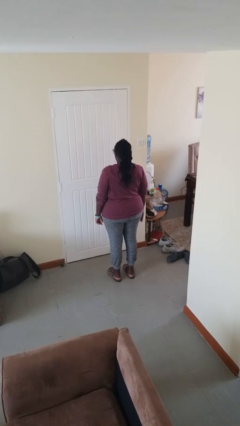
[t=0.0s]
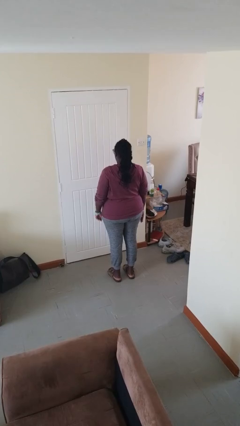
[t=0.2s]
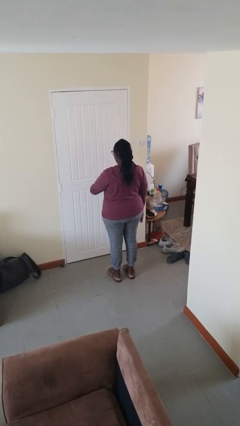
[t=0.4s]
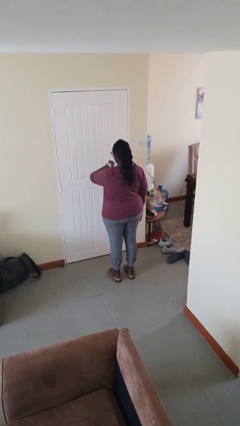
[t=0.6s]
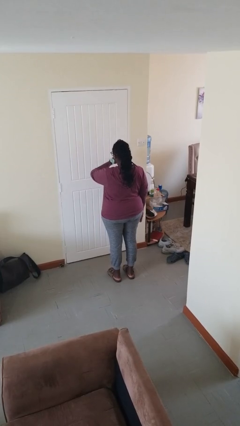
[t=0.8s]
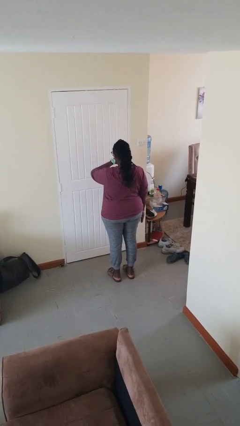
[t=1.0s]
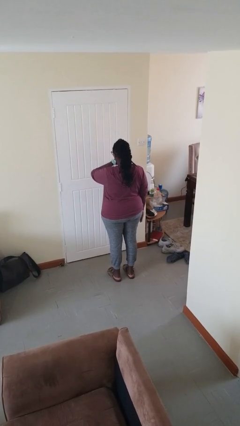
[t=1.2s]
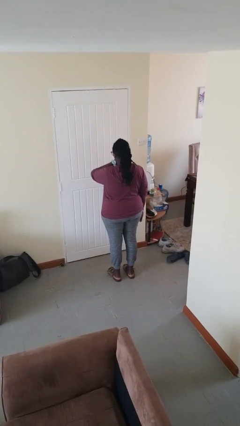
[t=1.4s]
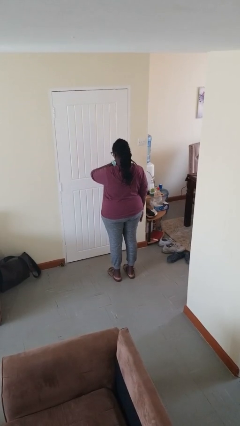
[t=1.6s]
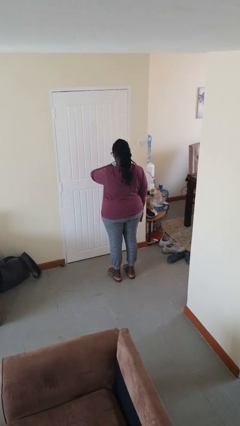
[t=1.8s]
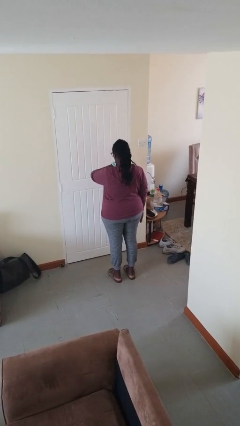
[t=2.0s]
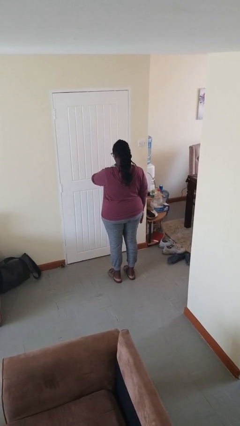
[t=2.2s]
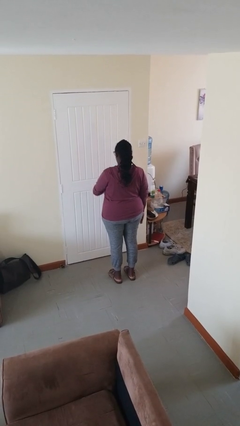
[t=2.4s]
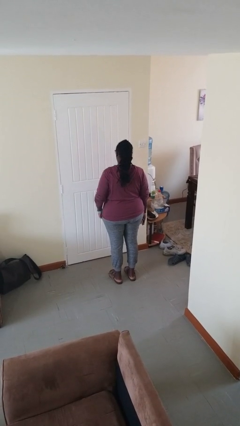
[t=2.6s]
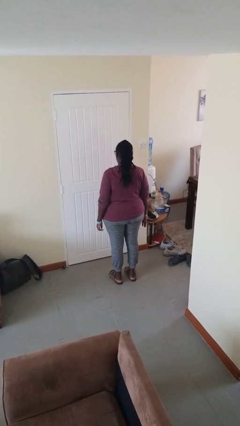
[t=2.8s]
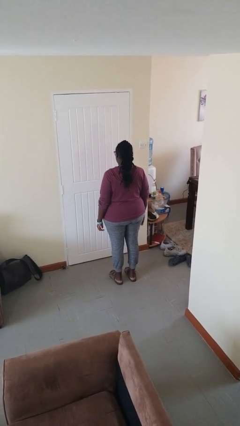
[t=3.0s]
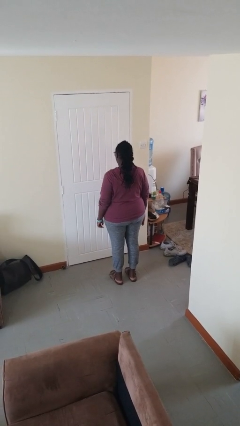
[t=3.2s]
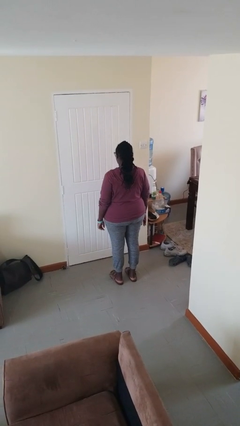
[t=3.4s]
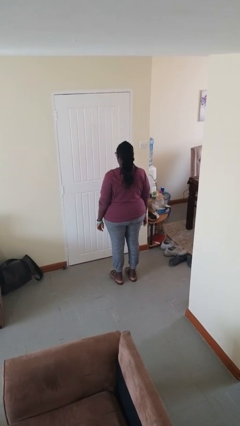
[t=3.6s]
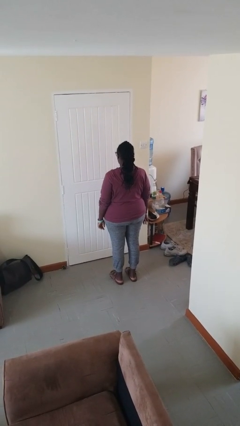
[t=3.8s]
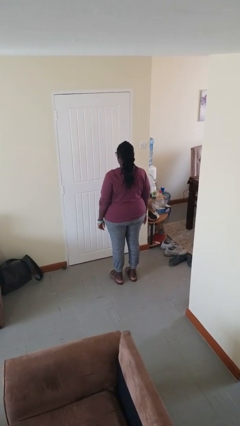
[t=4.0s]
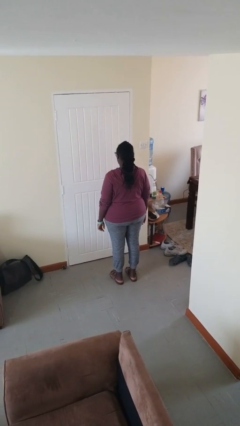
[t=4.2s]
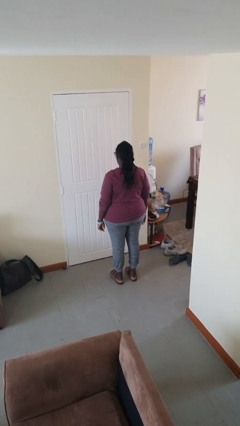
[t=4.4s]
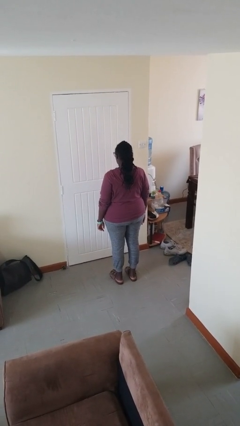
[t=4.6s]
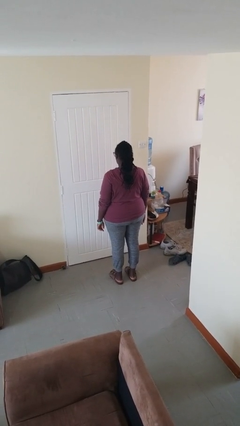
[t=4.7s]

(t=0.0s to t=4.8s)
person looks at wristwatch

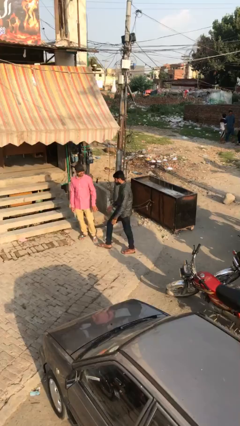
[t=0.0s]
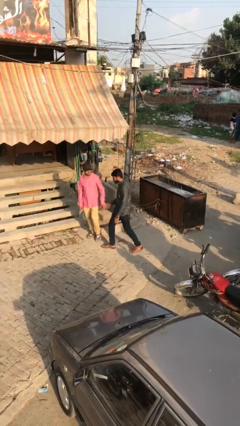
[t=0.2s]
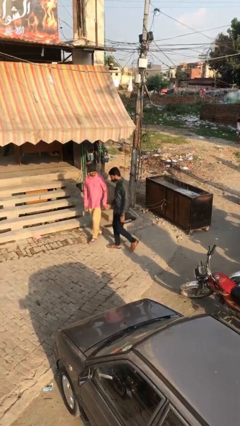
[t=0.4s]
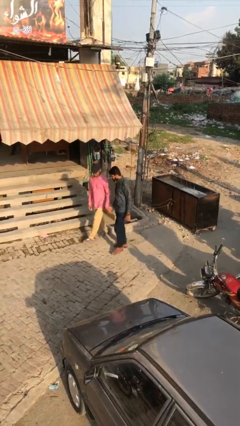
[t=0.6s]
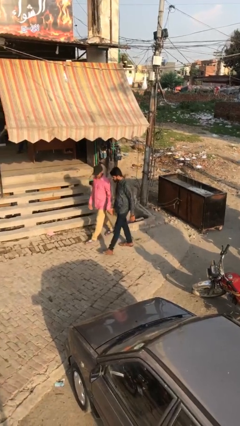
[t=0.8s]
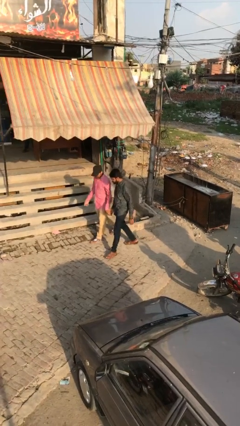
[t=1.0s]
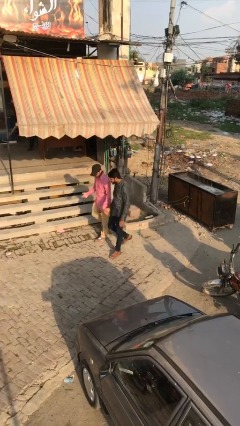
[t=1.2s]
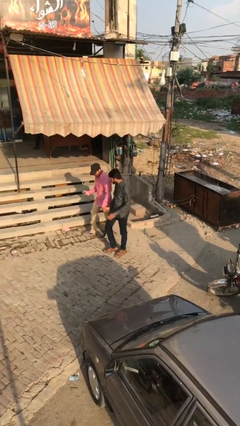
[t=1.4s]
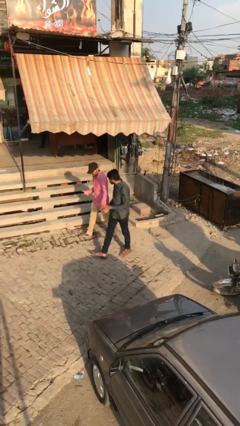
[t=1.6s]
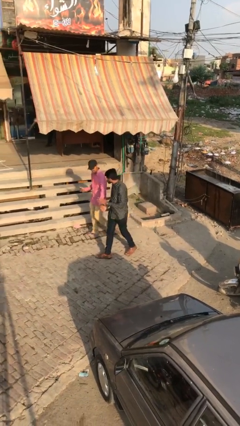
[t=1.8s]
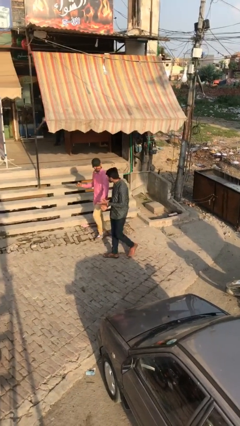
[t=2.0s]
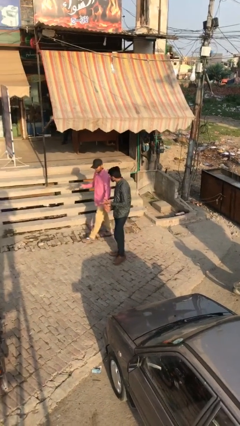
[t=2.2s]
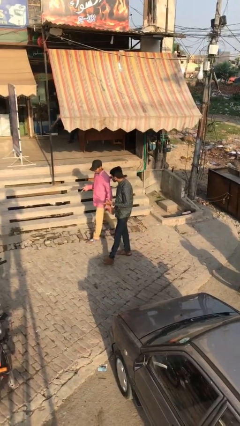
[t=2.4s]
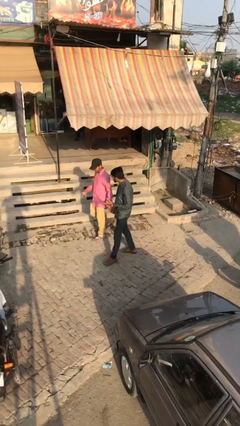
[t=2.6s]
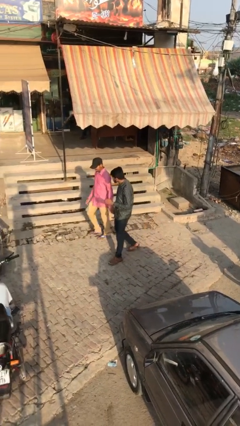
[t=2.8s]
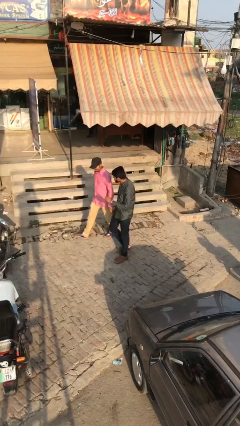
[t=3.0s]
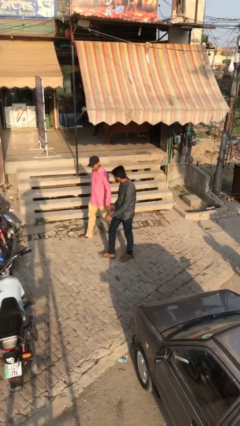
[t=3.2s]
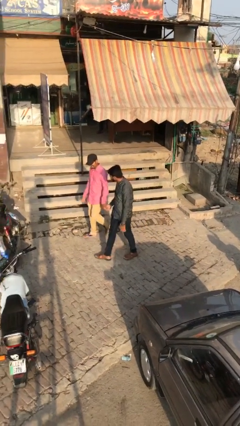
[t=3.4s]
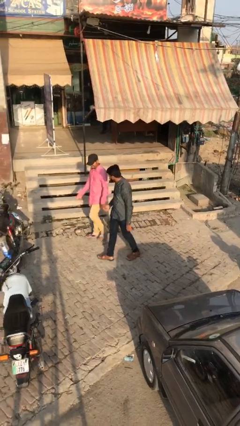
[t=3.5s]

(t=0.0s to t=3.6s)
person holds hand

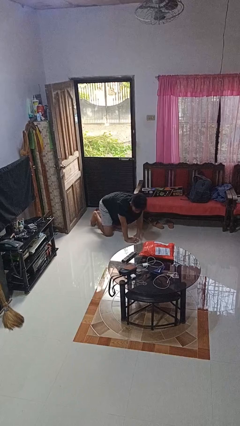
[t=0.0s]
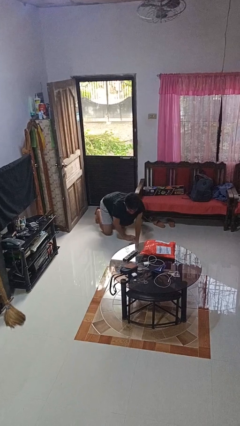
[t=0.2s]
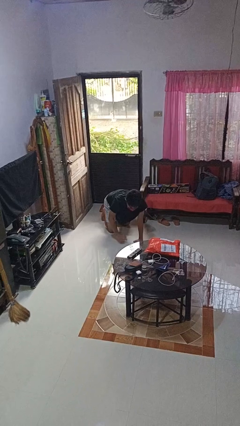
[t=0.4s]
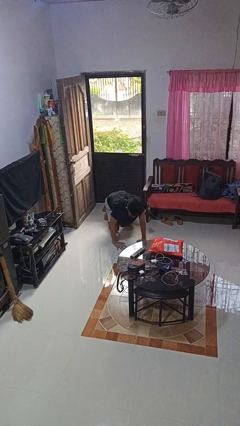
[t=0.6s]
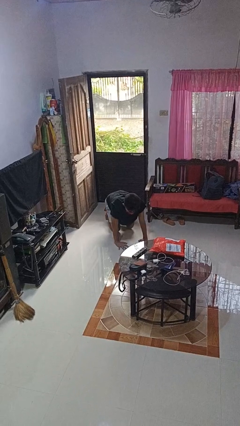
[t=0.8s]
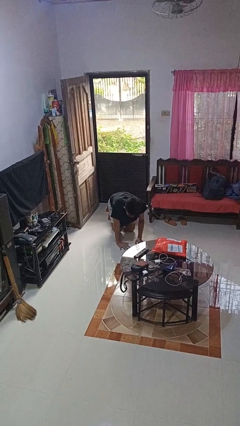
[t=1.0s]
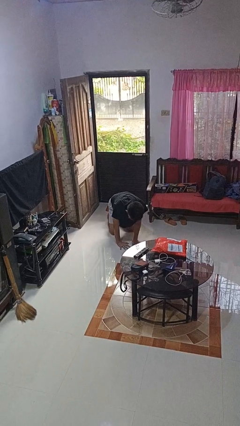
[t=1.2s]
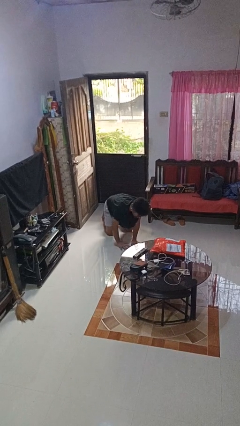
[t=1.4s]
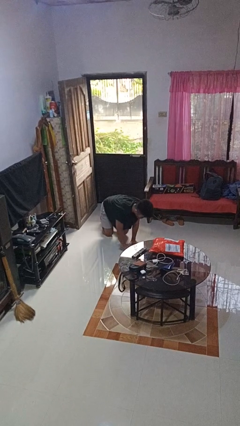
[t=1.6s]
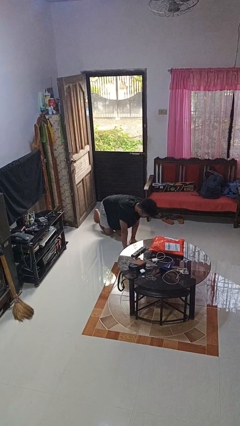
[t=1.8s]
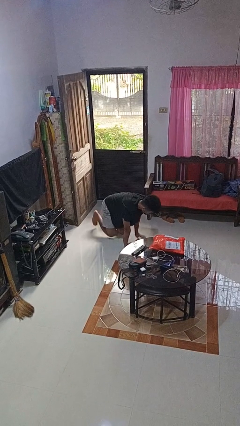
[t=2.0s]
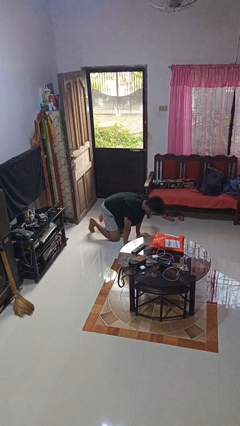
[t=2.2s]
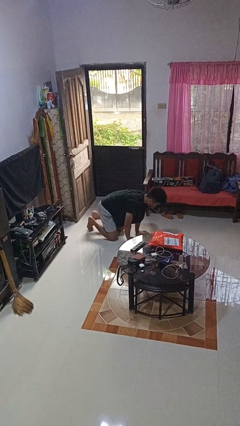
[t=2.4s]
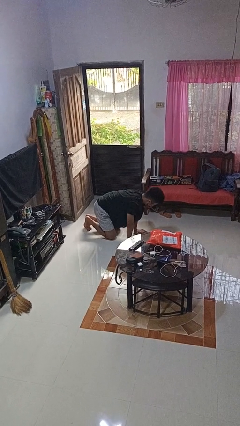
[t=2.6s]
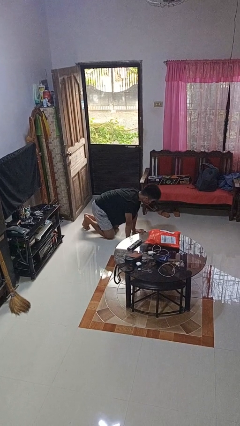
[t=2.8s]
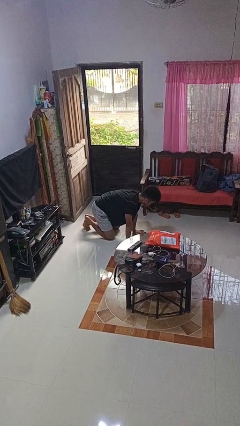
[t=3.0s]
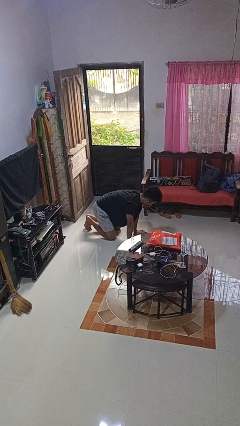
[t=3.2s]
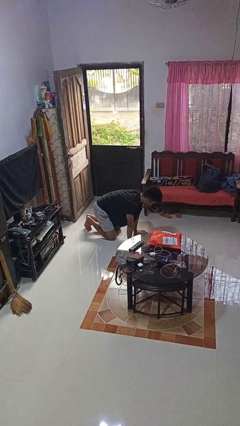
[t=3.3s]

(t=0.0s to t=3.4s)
person crawls

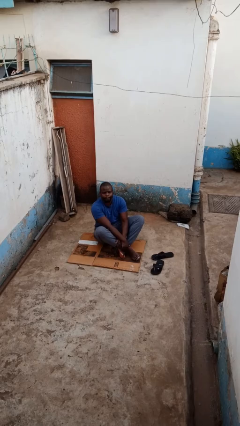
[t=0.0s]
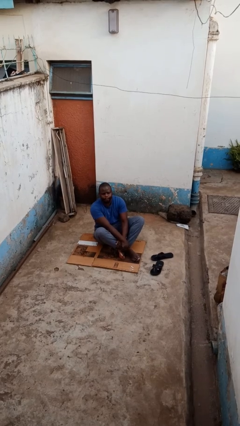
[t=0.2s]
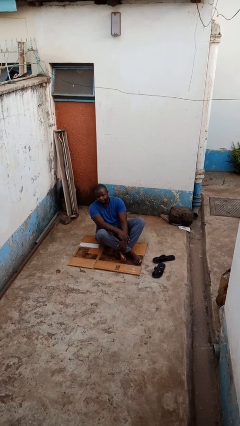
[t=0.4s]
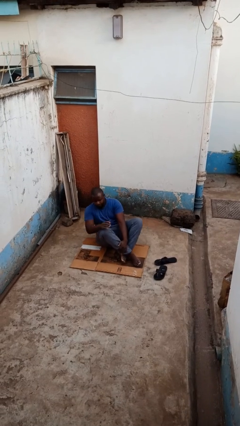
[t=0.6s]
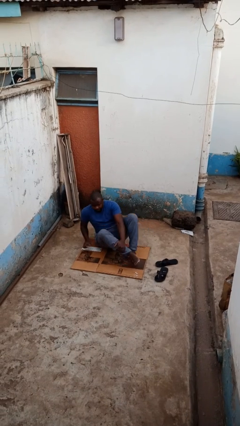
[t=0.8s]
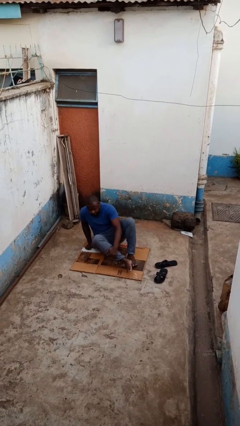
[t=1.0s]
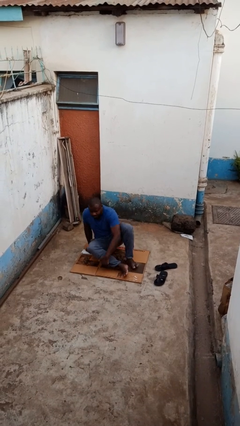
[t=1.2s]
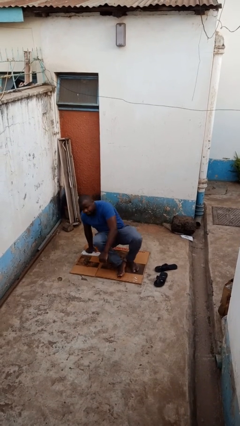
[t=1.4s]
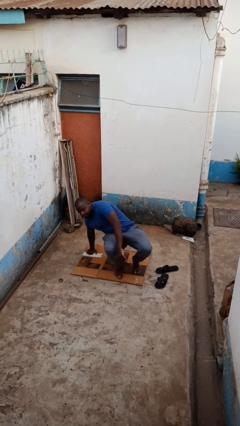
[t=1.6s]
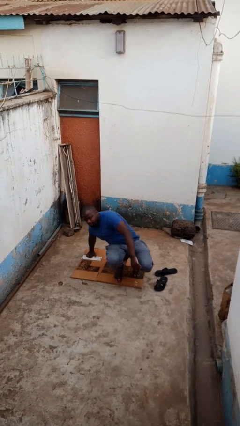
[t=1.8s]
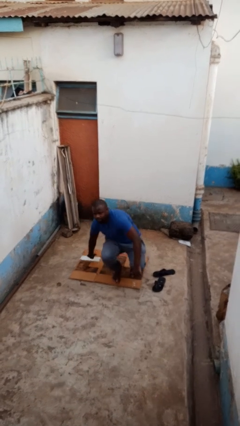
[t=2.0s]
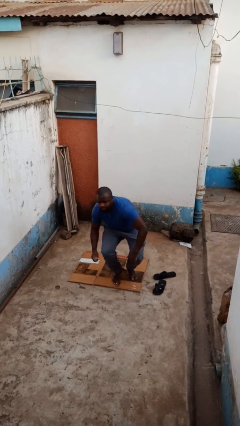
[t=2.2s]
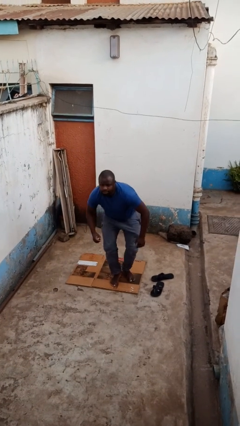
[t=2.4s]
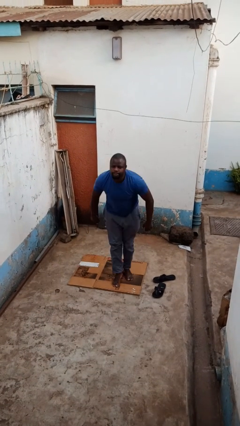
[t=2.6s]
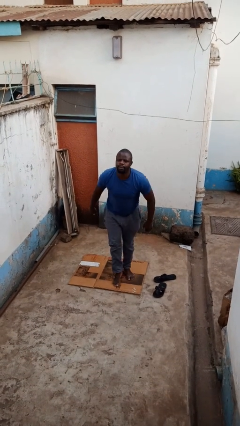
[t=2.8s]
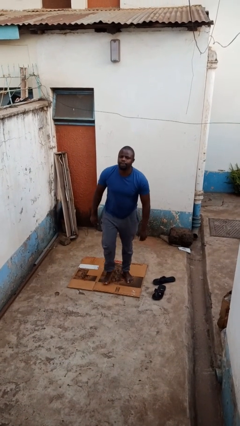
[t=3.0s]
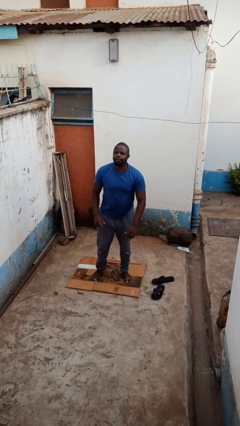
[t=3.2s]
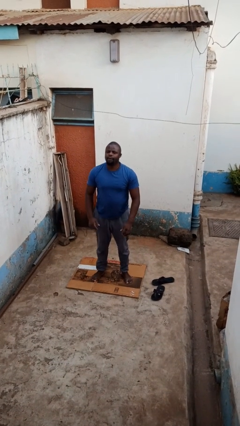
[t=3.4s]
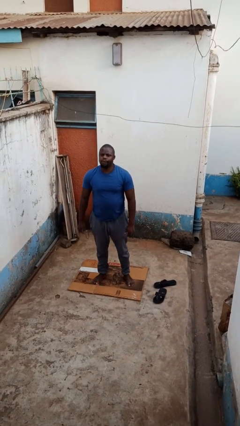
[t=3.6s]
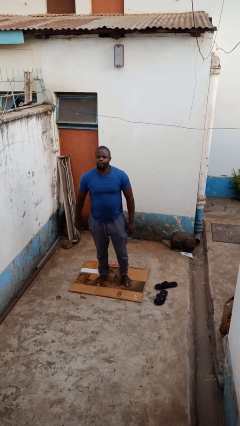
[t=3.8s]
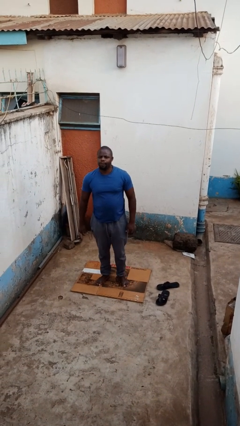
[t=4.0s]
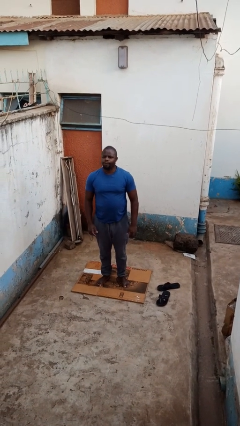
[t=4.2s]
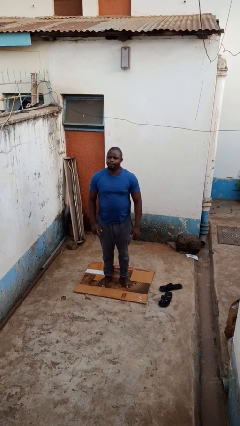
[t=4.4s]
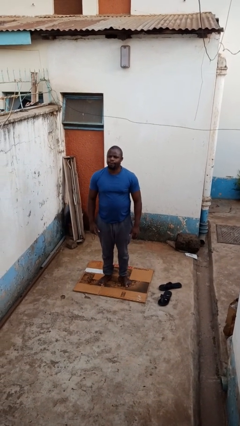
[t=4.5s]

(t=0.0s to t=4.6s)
person stands up from floor

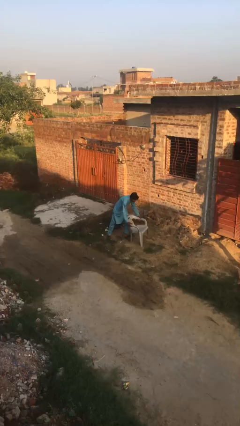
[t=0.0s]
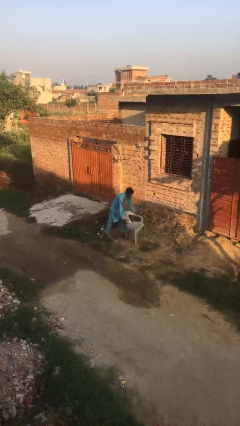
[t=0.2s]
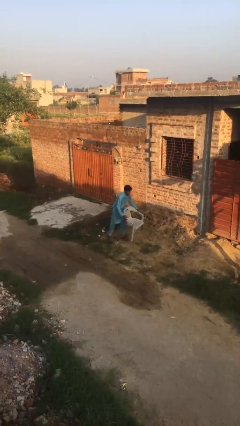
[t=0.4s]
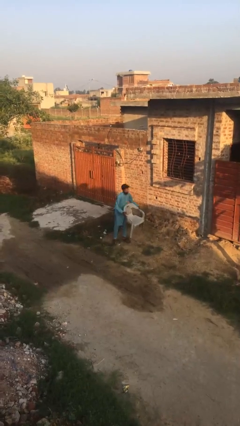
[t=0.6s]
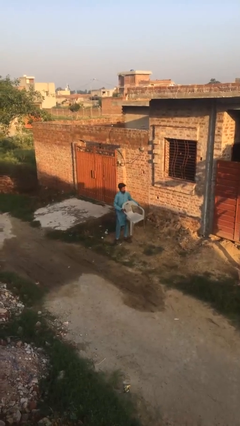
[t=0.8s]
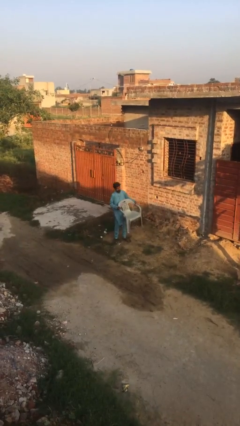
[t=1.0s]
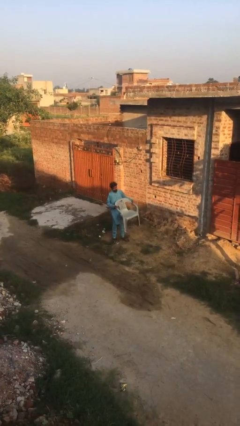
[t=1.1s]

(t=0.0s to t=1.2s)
person picks up object from floor
